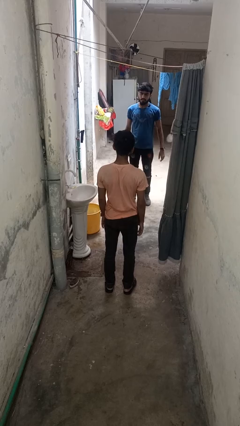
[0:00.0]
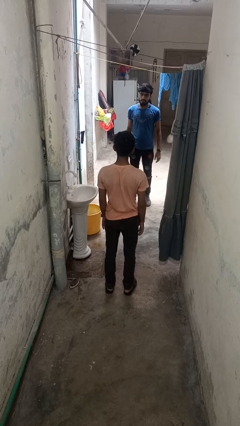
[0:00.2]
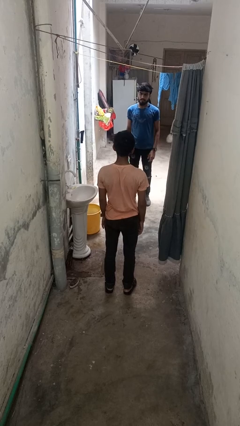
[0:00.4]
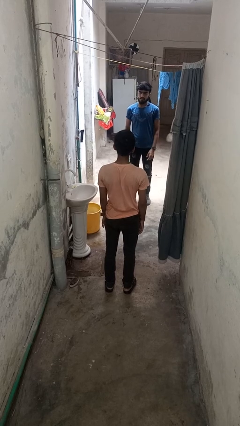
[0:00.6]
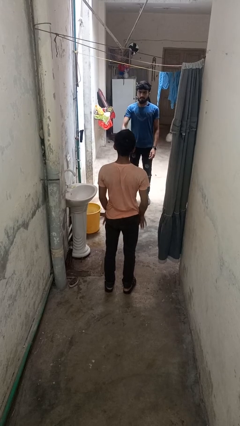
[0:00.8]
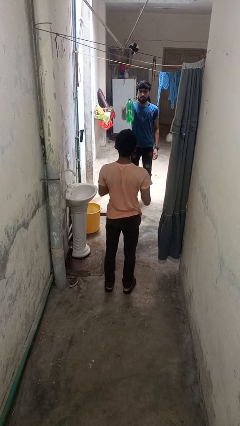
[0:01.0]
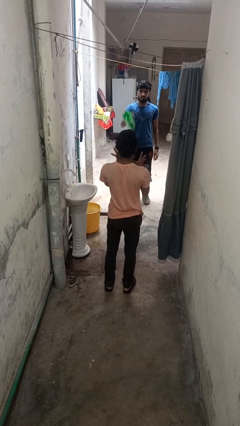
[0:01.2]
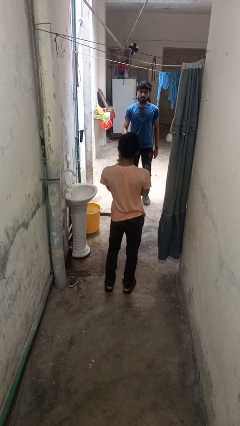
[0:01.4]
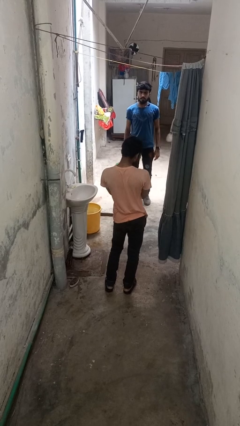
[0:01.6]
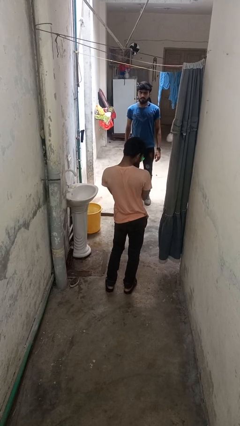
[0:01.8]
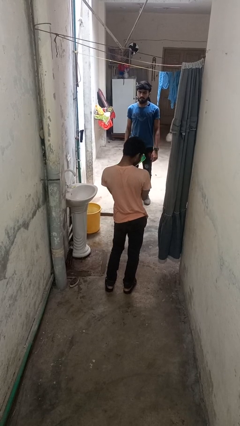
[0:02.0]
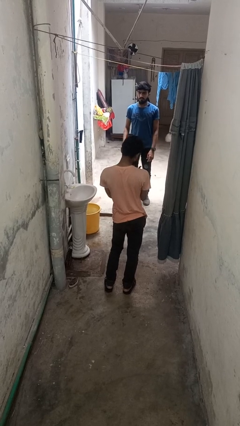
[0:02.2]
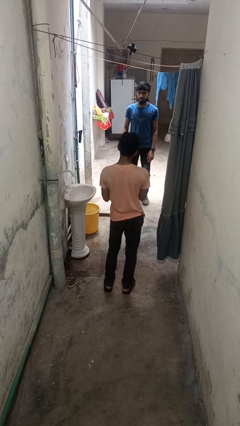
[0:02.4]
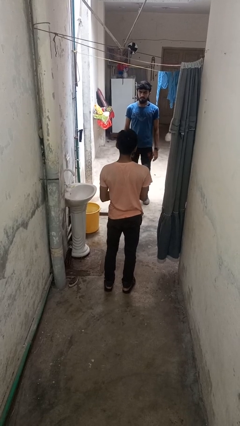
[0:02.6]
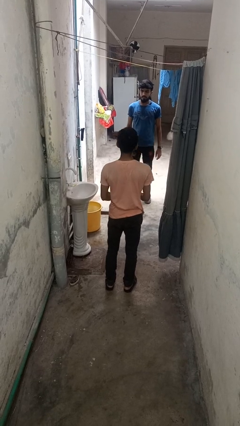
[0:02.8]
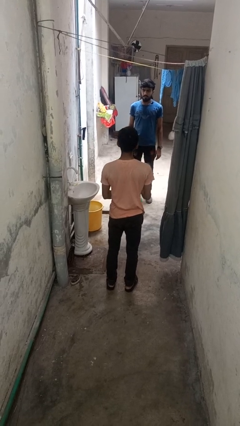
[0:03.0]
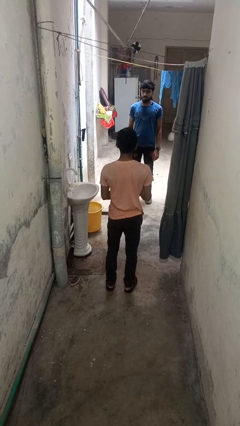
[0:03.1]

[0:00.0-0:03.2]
person catches object from person

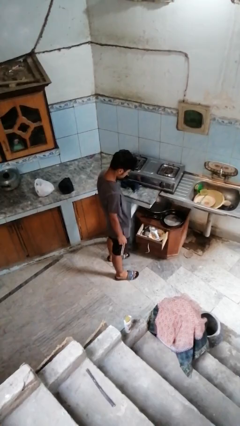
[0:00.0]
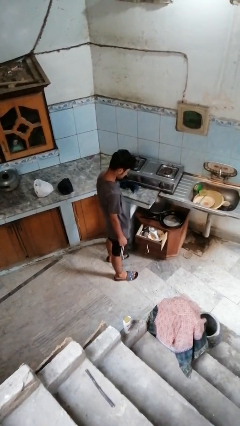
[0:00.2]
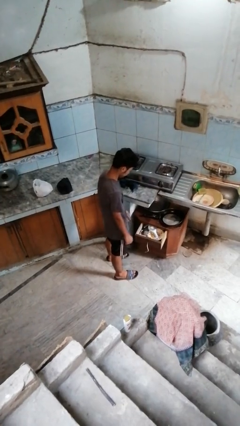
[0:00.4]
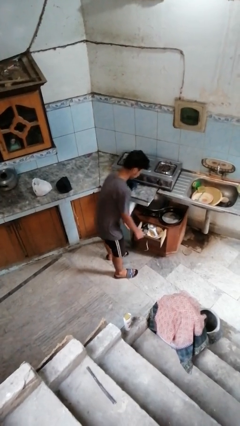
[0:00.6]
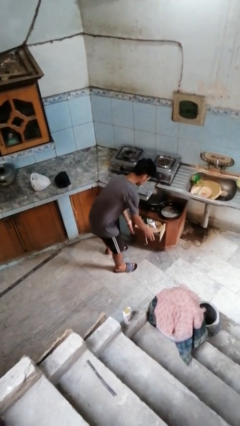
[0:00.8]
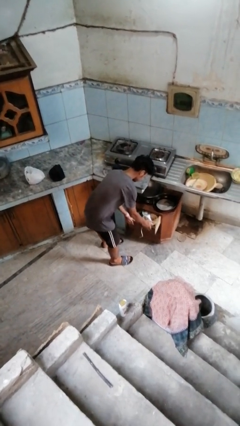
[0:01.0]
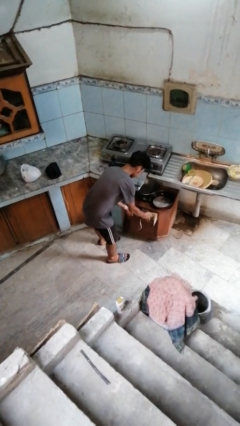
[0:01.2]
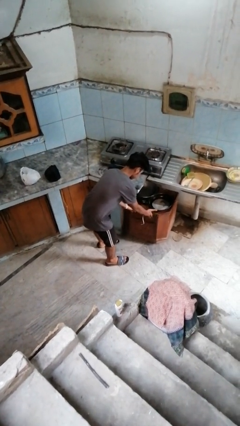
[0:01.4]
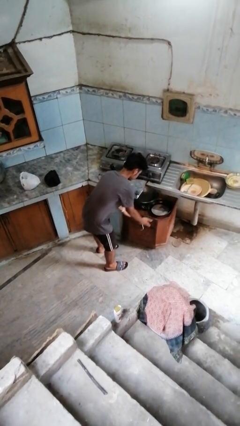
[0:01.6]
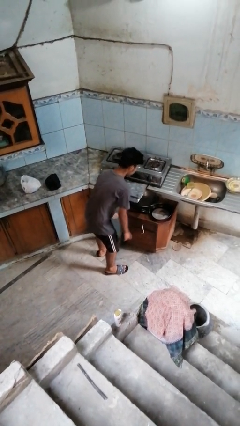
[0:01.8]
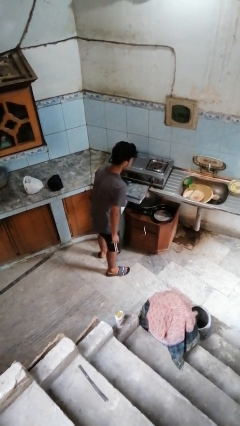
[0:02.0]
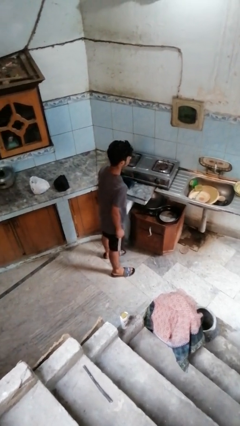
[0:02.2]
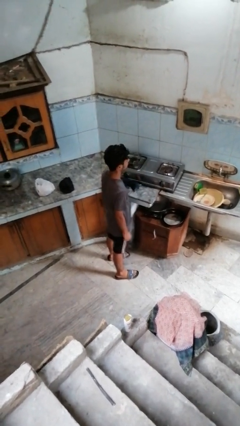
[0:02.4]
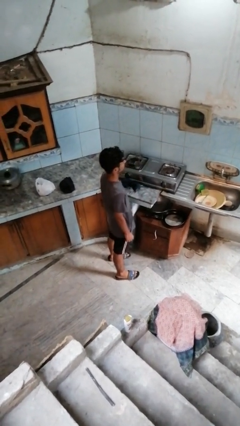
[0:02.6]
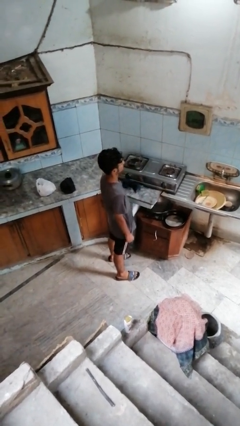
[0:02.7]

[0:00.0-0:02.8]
person closes kitchen drawer

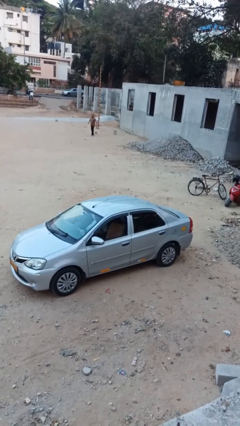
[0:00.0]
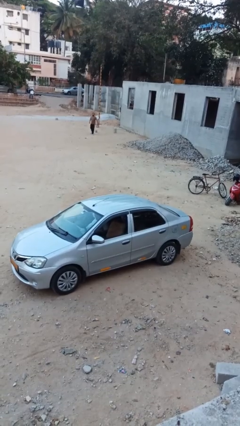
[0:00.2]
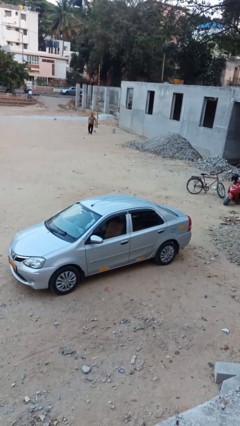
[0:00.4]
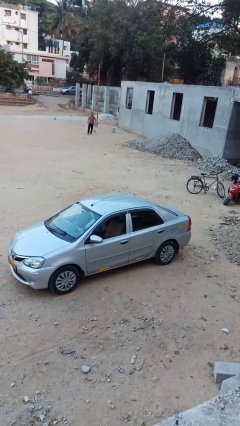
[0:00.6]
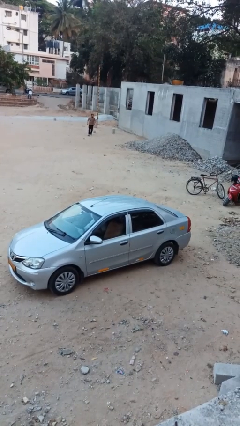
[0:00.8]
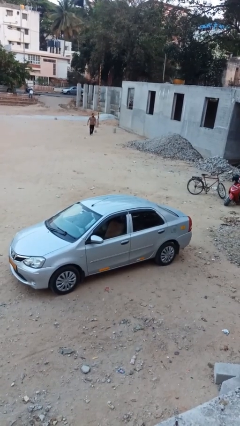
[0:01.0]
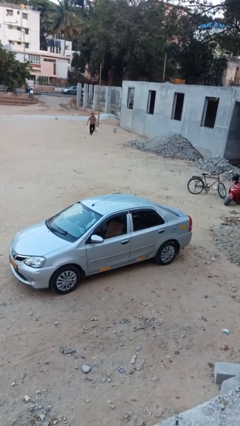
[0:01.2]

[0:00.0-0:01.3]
person exits car

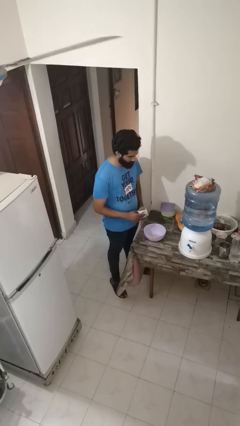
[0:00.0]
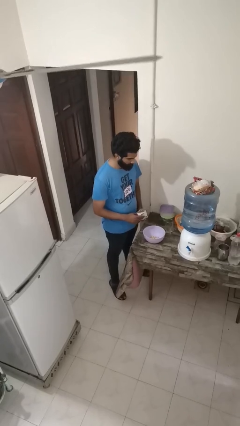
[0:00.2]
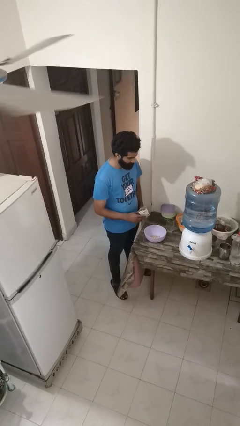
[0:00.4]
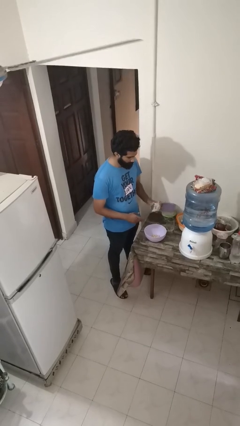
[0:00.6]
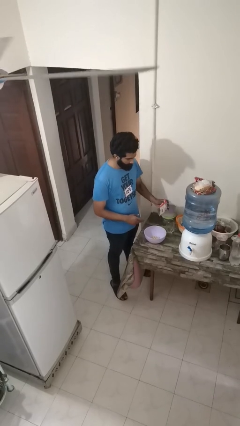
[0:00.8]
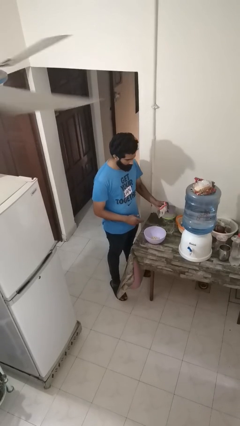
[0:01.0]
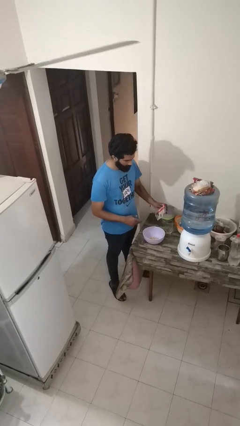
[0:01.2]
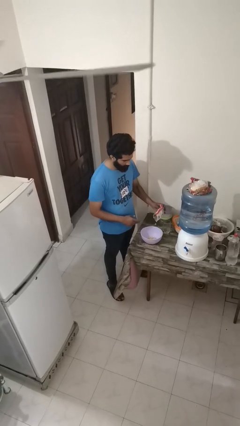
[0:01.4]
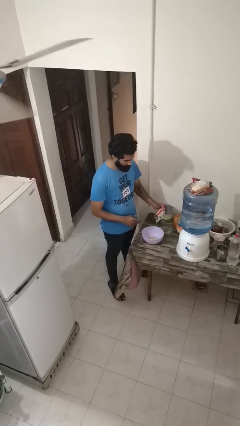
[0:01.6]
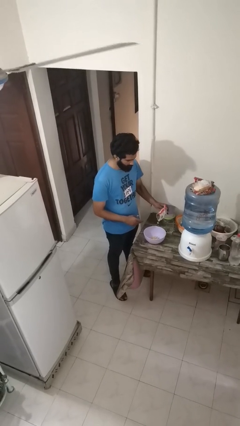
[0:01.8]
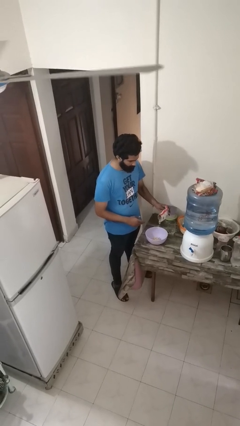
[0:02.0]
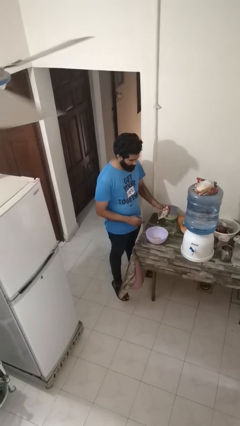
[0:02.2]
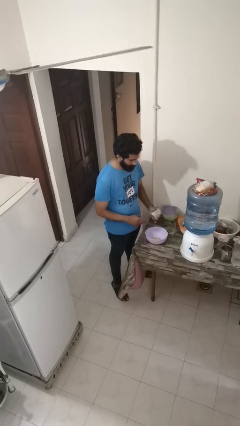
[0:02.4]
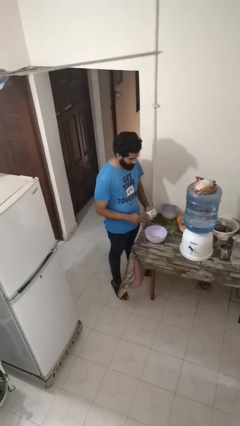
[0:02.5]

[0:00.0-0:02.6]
person pours into bowl

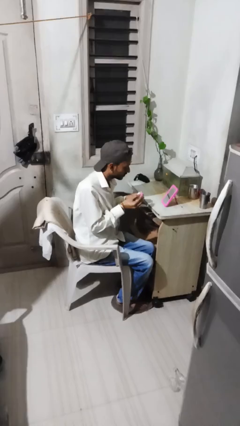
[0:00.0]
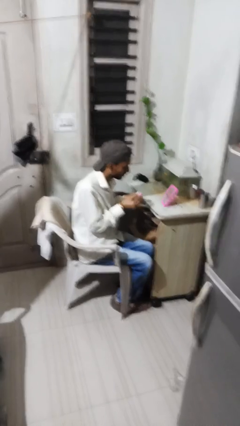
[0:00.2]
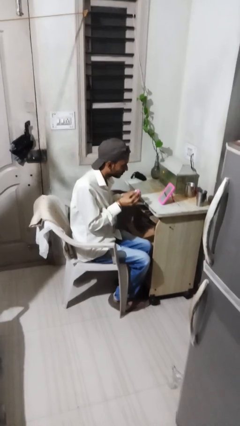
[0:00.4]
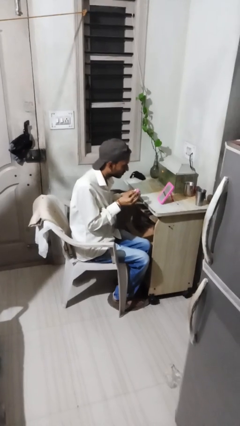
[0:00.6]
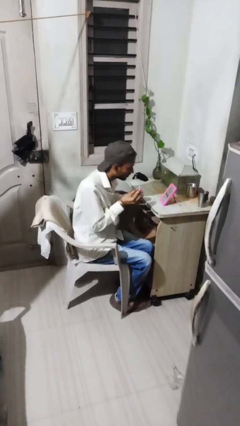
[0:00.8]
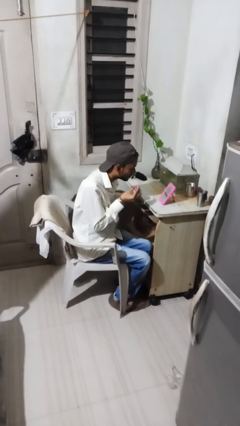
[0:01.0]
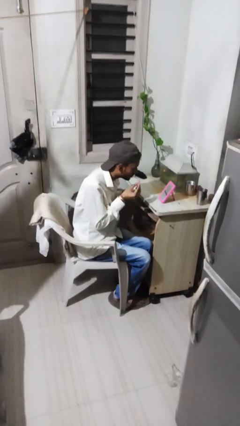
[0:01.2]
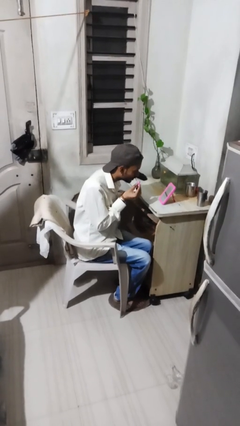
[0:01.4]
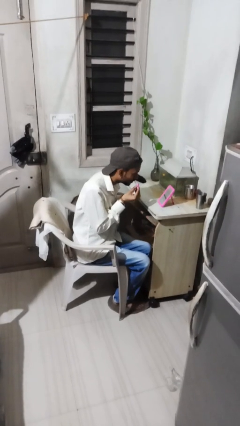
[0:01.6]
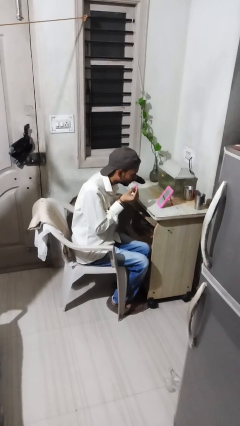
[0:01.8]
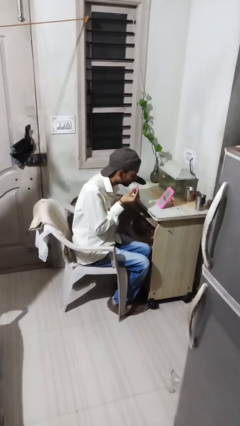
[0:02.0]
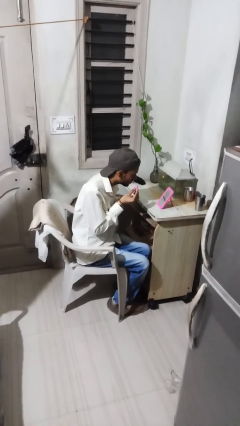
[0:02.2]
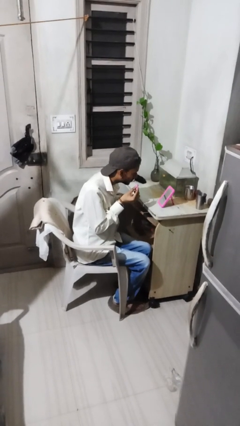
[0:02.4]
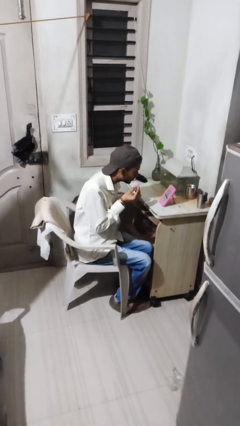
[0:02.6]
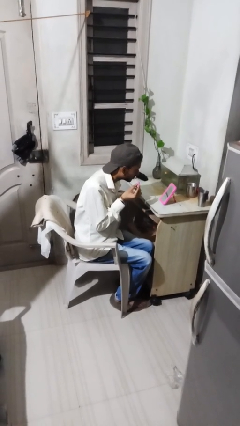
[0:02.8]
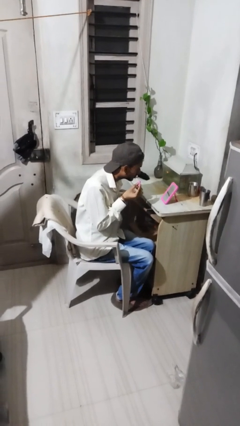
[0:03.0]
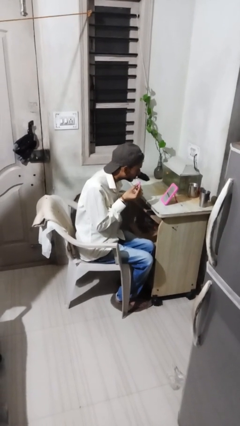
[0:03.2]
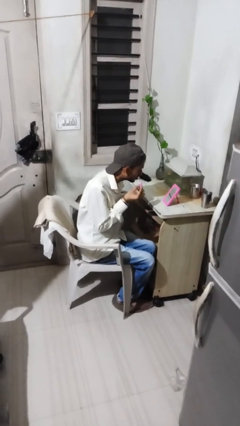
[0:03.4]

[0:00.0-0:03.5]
person applies lip makeup

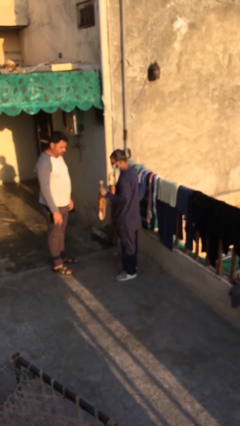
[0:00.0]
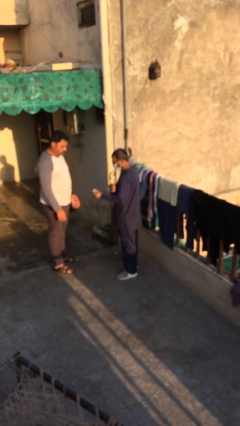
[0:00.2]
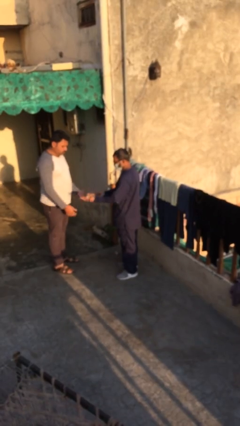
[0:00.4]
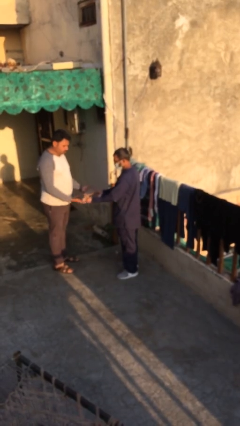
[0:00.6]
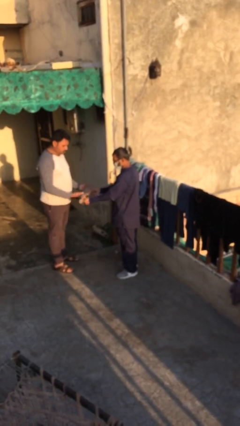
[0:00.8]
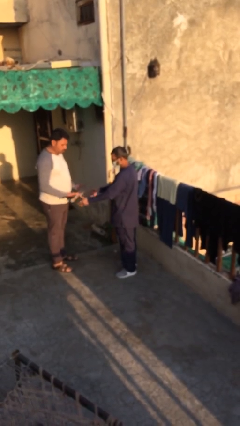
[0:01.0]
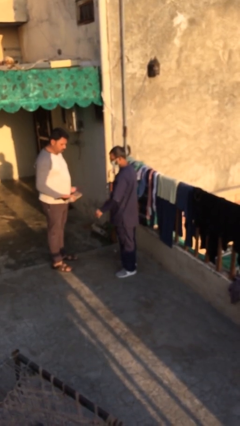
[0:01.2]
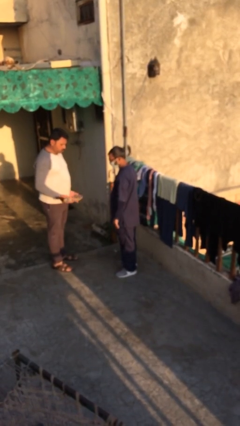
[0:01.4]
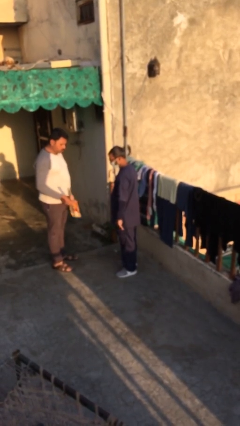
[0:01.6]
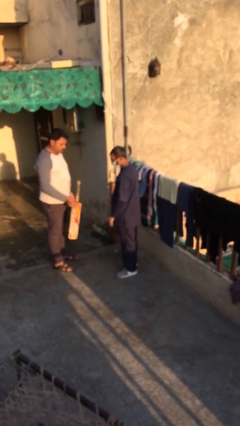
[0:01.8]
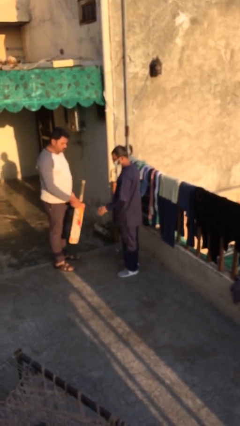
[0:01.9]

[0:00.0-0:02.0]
person transfers object to person

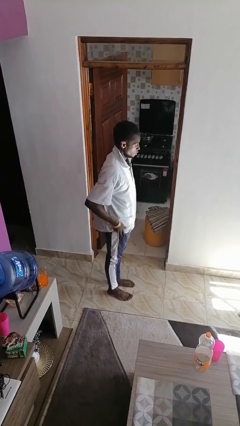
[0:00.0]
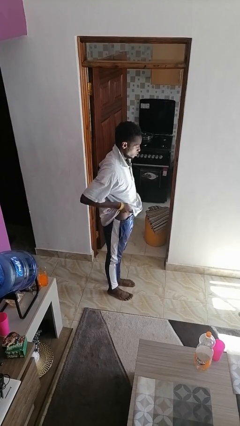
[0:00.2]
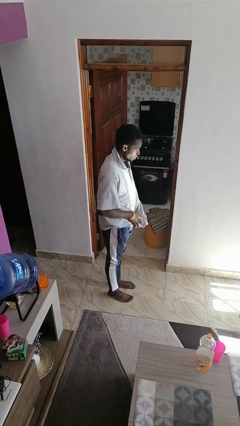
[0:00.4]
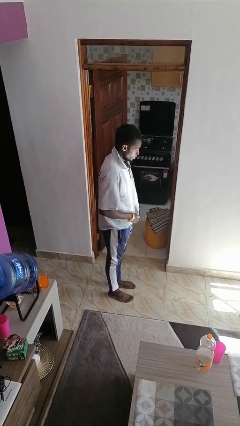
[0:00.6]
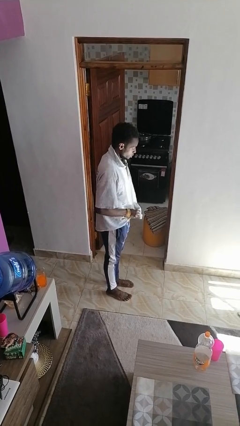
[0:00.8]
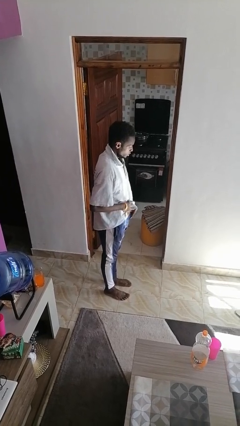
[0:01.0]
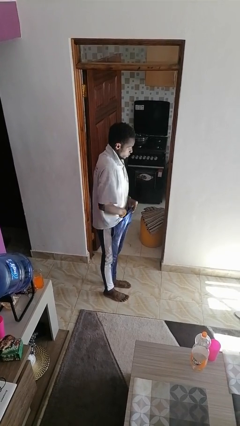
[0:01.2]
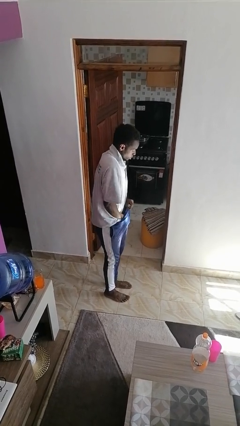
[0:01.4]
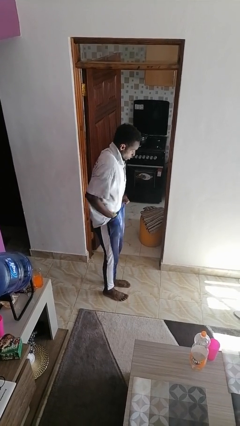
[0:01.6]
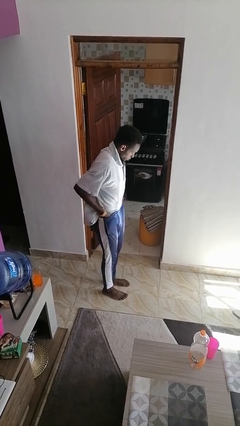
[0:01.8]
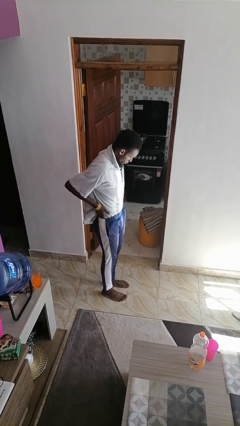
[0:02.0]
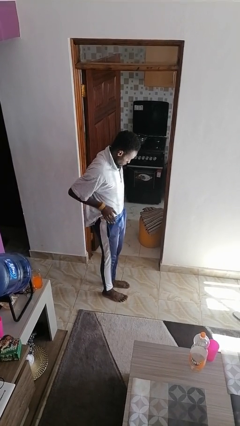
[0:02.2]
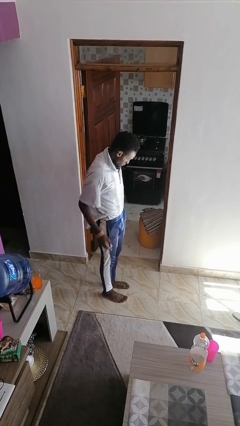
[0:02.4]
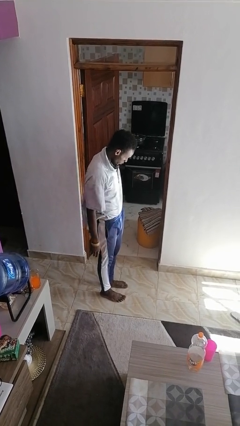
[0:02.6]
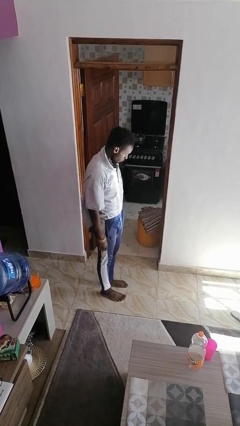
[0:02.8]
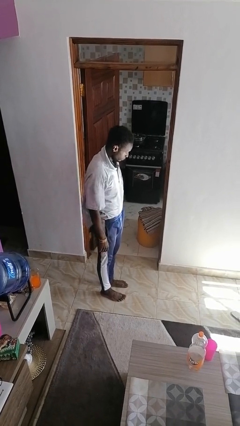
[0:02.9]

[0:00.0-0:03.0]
person tucks in shirt
